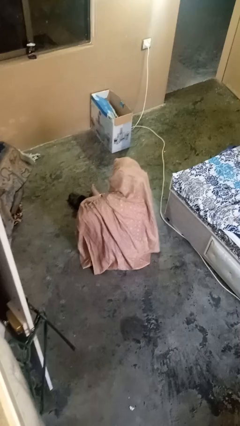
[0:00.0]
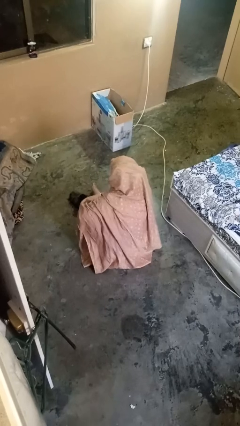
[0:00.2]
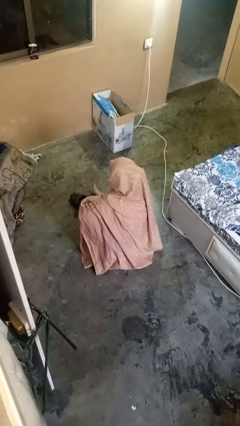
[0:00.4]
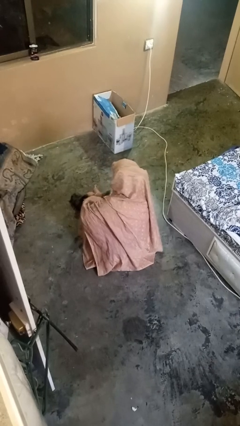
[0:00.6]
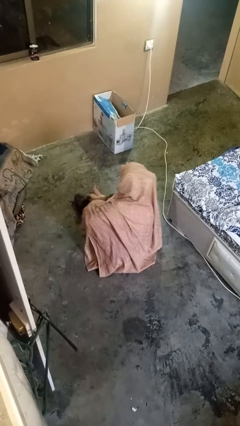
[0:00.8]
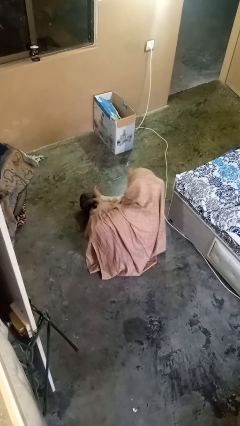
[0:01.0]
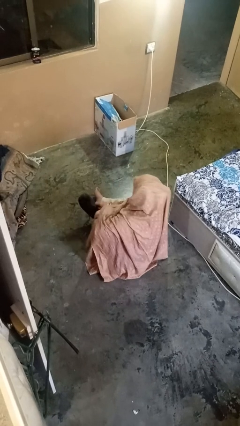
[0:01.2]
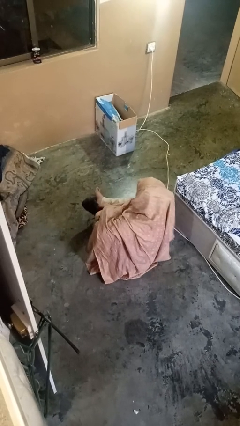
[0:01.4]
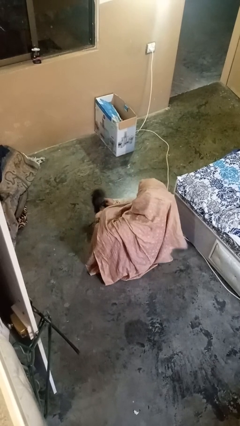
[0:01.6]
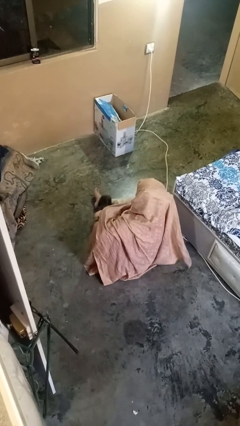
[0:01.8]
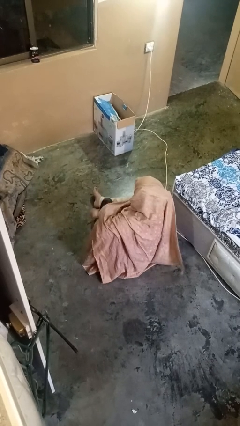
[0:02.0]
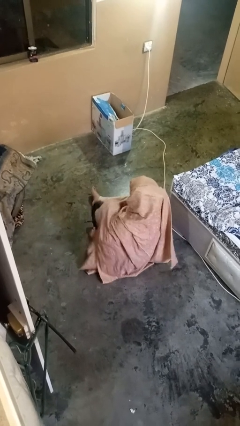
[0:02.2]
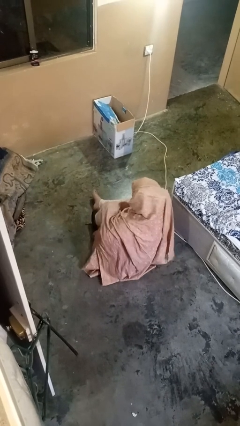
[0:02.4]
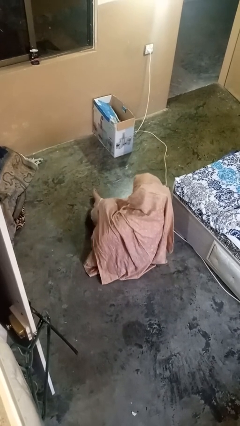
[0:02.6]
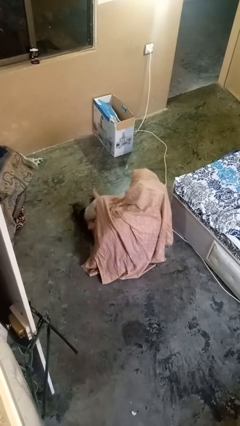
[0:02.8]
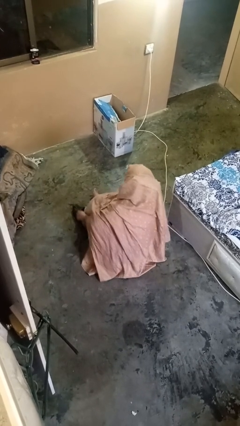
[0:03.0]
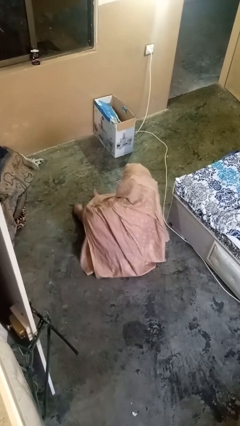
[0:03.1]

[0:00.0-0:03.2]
person puts on shoes

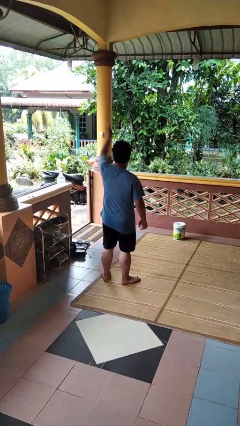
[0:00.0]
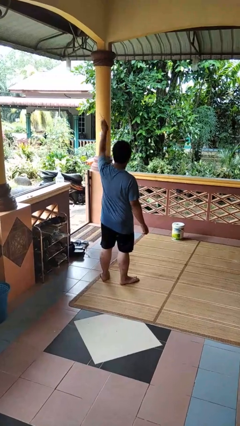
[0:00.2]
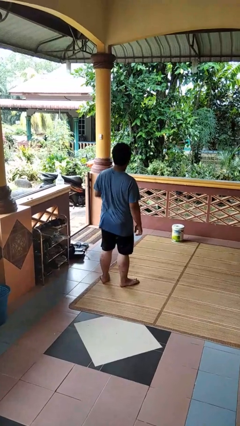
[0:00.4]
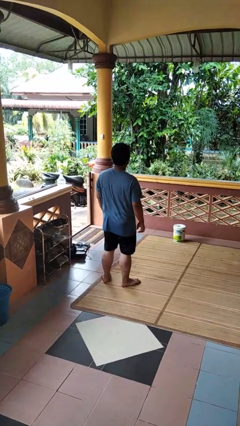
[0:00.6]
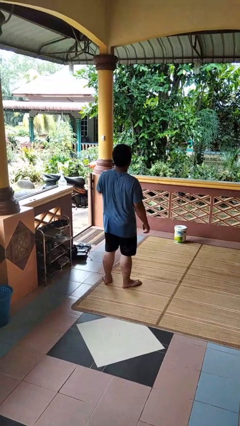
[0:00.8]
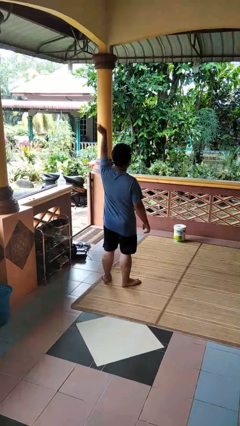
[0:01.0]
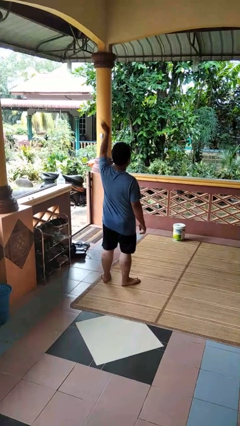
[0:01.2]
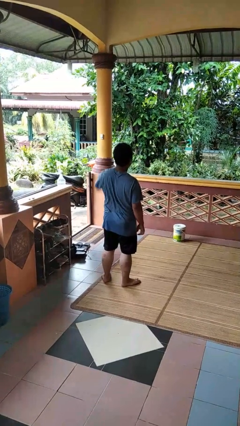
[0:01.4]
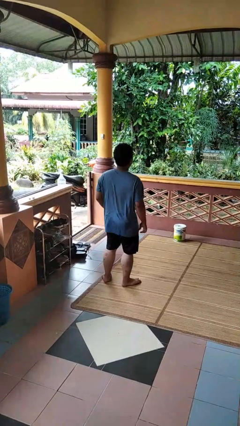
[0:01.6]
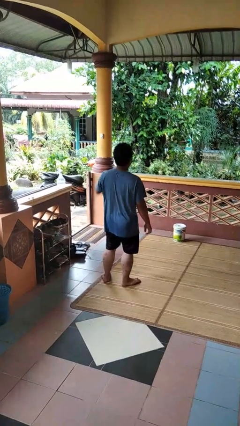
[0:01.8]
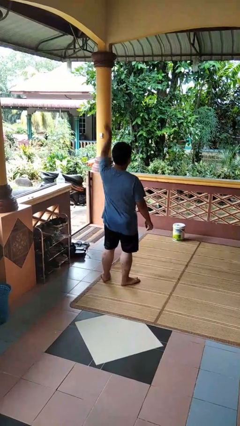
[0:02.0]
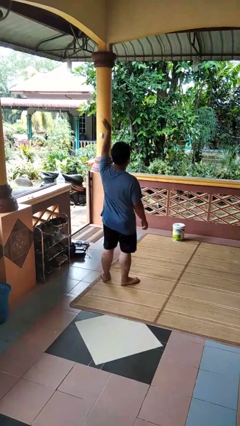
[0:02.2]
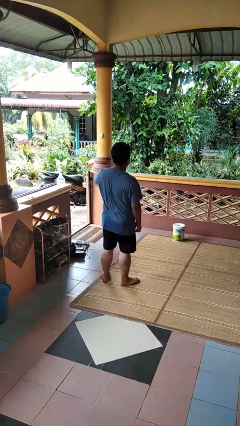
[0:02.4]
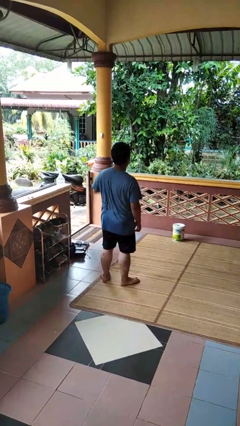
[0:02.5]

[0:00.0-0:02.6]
person dances in place

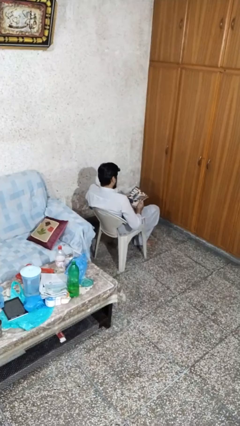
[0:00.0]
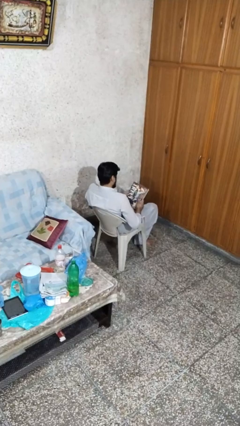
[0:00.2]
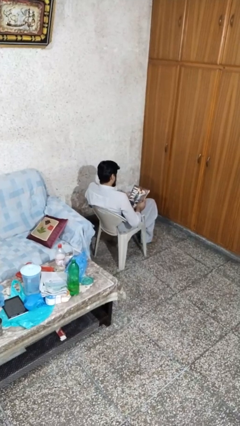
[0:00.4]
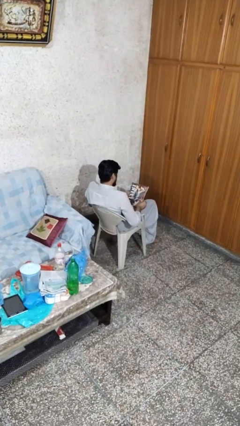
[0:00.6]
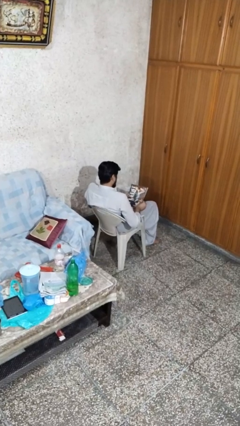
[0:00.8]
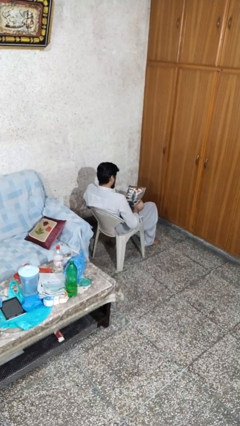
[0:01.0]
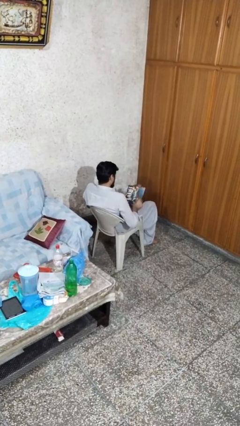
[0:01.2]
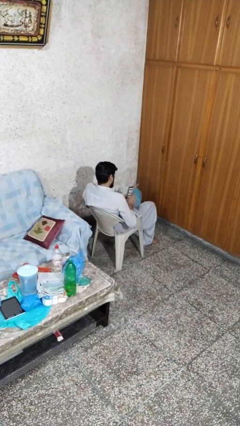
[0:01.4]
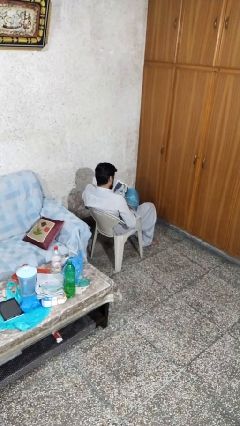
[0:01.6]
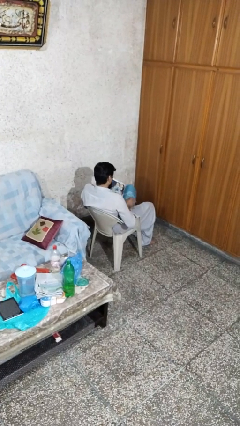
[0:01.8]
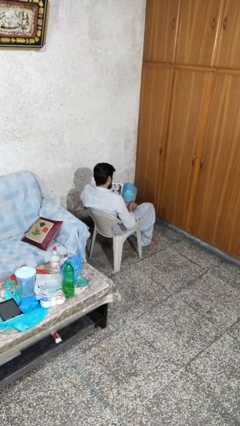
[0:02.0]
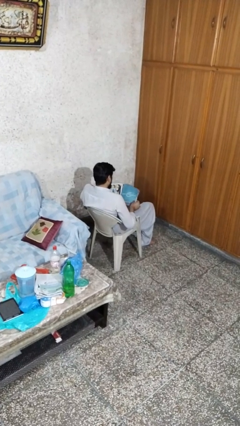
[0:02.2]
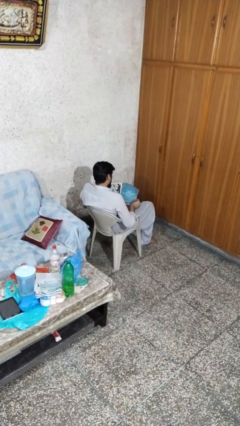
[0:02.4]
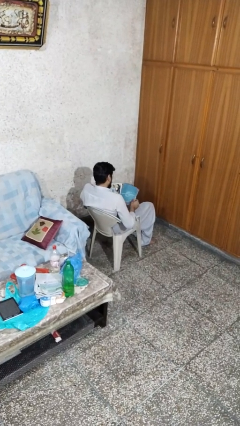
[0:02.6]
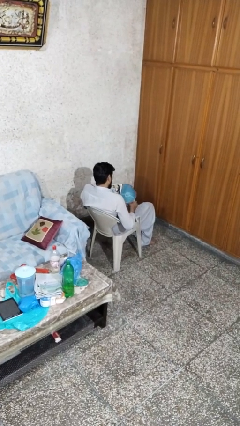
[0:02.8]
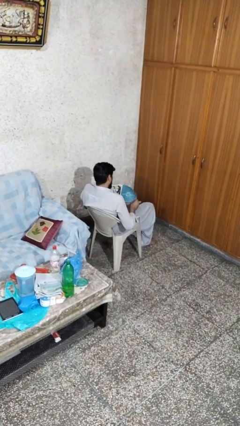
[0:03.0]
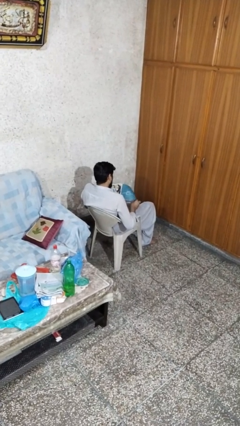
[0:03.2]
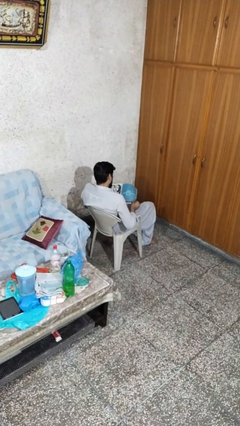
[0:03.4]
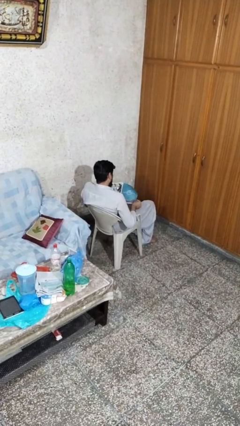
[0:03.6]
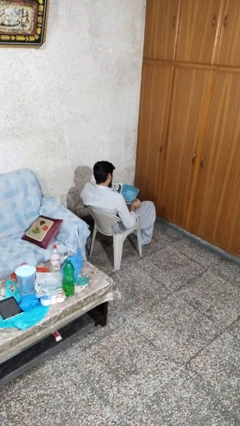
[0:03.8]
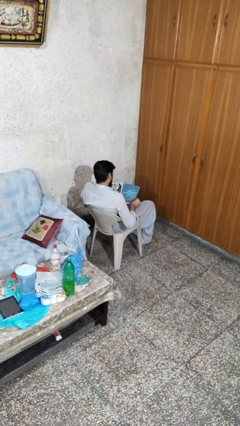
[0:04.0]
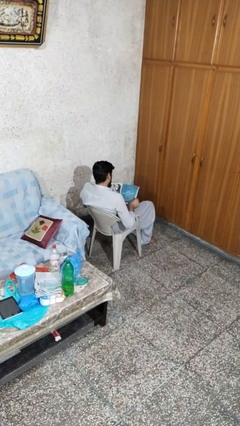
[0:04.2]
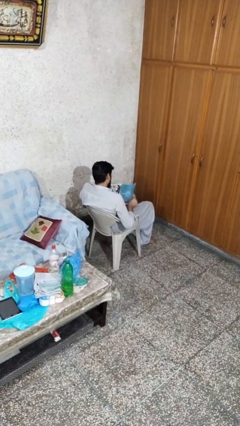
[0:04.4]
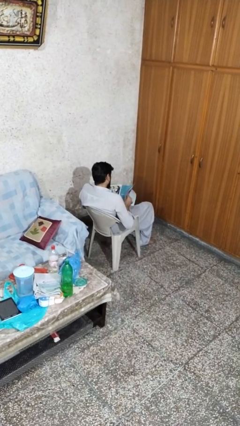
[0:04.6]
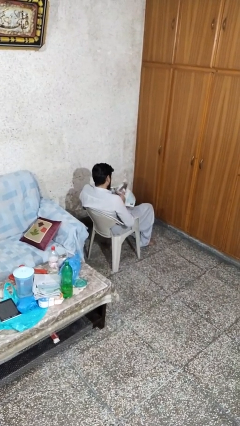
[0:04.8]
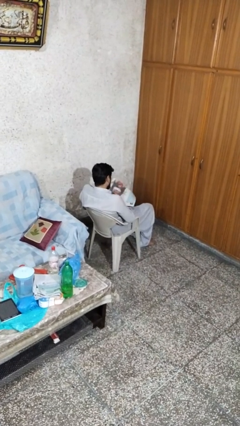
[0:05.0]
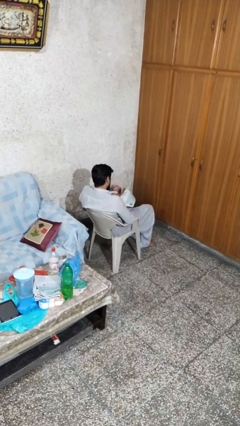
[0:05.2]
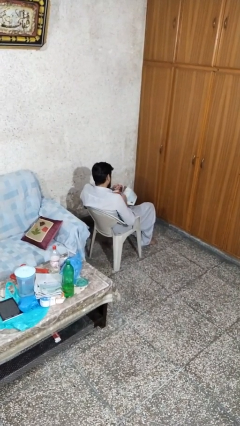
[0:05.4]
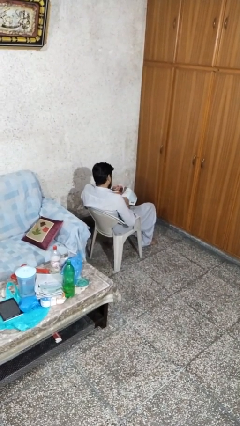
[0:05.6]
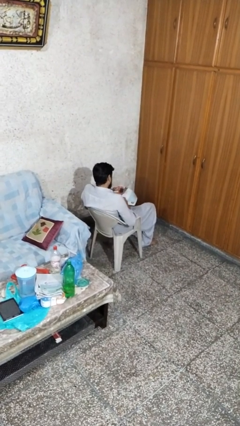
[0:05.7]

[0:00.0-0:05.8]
person reads magazine

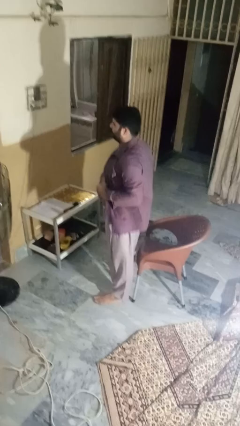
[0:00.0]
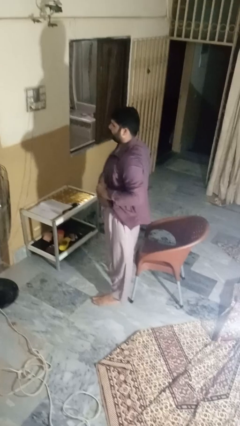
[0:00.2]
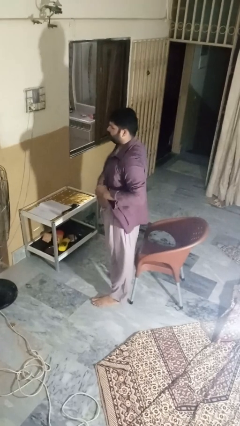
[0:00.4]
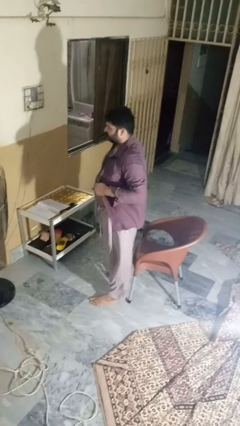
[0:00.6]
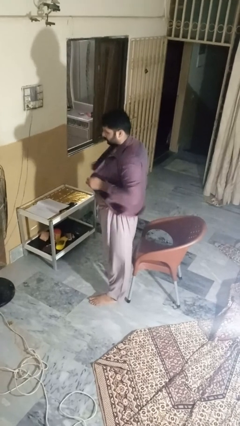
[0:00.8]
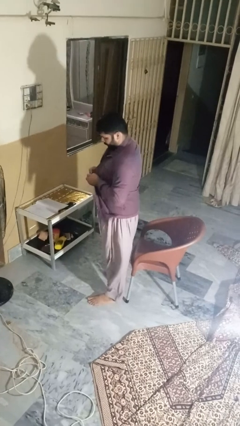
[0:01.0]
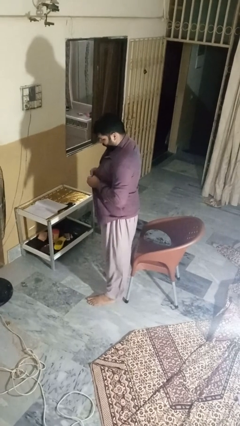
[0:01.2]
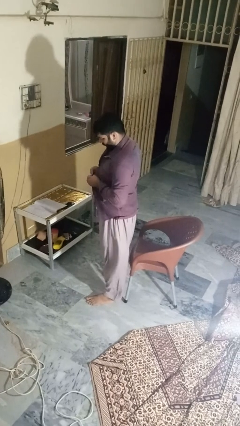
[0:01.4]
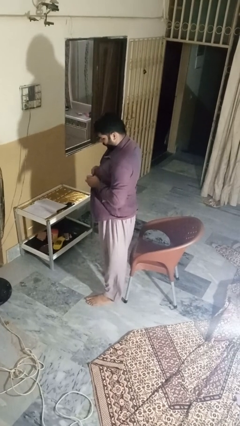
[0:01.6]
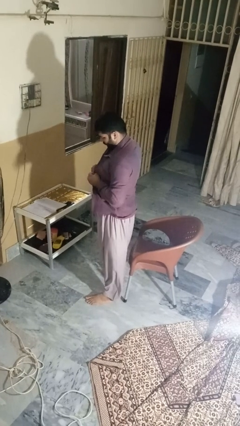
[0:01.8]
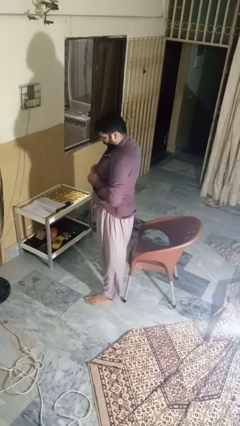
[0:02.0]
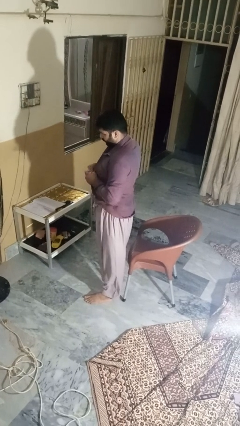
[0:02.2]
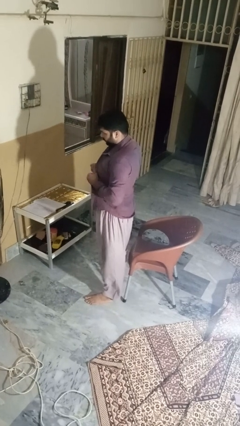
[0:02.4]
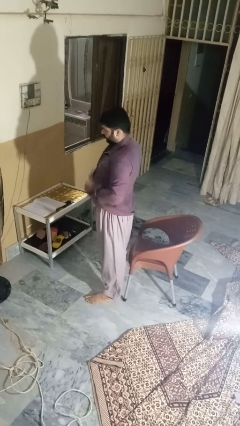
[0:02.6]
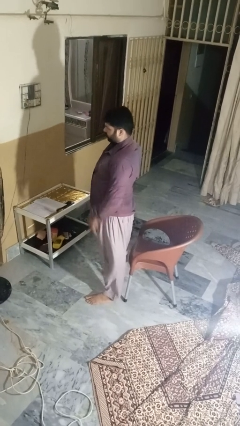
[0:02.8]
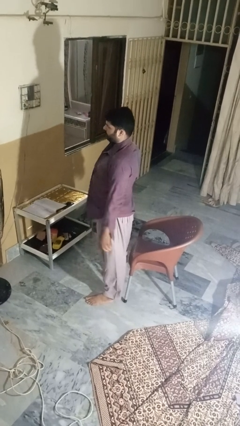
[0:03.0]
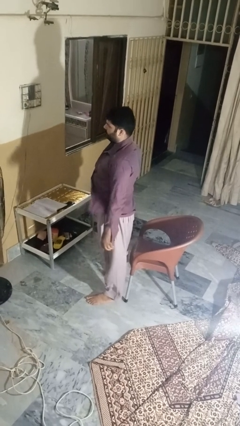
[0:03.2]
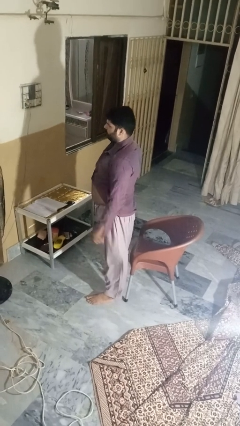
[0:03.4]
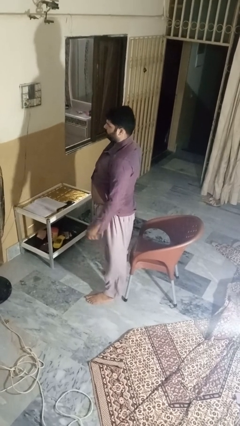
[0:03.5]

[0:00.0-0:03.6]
person buttons shirt

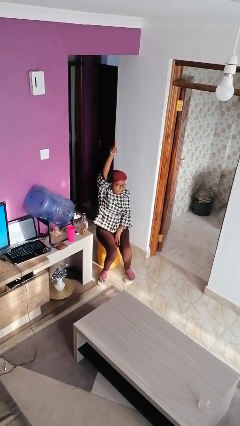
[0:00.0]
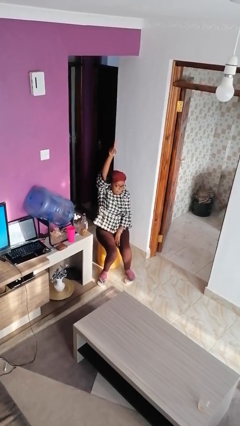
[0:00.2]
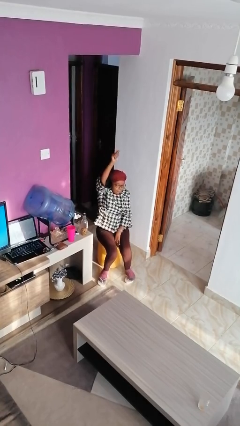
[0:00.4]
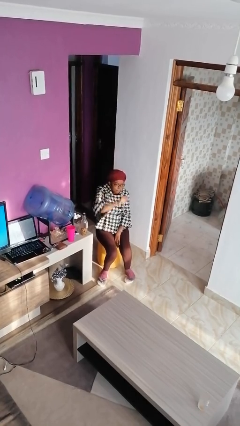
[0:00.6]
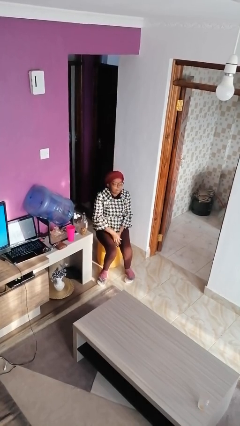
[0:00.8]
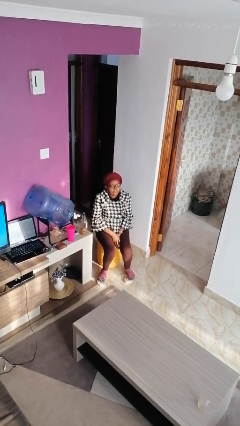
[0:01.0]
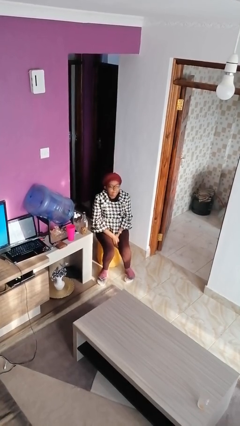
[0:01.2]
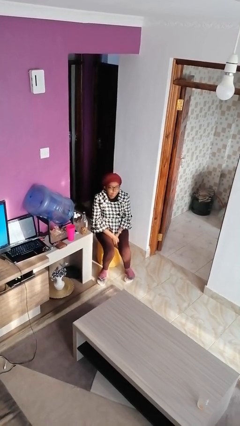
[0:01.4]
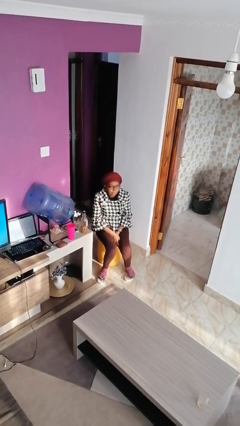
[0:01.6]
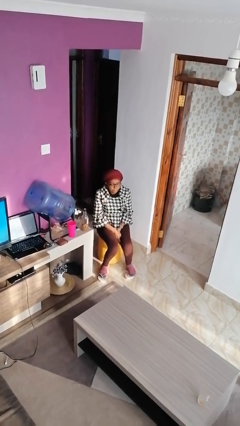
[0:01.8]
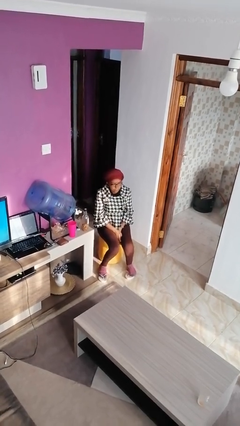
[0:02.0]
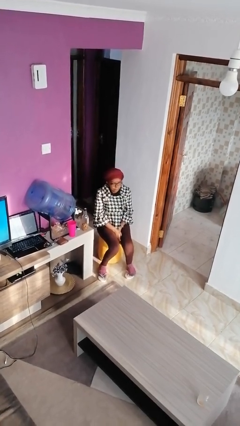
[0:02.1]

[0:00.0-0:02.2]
person gestures lower hand
